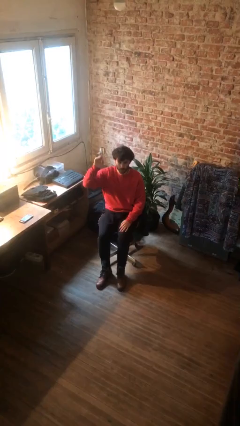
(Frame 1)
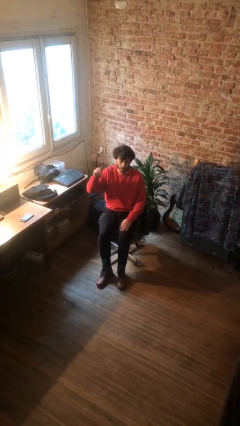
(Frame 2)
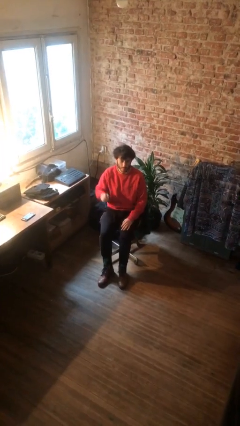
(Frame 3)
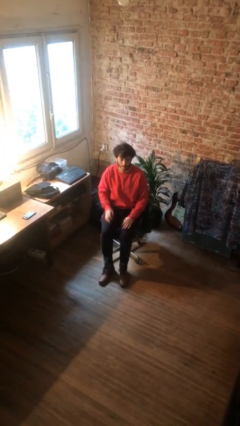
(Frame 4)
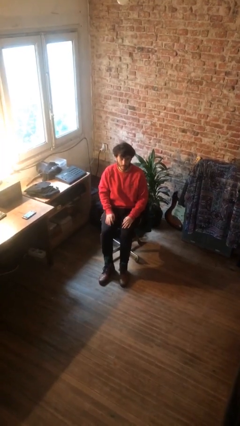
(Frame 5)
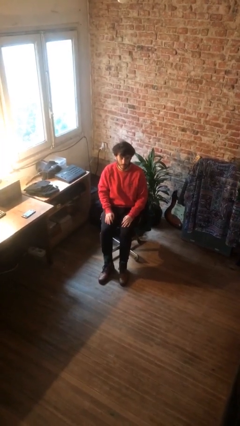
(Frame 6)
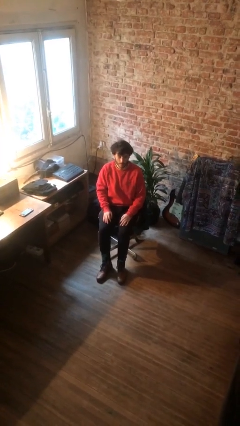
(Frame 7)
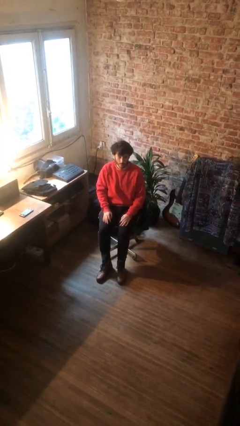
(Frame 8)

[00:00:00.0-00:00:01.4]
person gestures lower hand

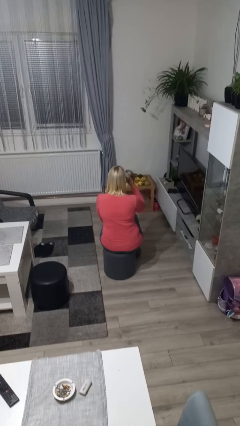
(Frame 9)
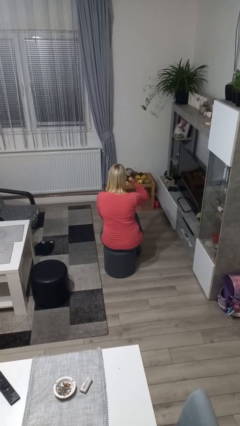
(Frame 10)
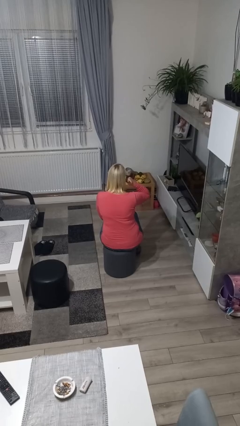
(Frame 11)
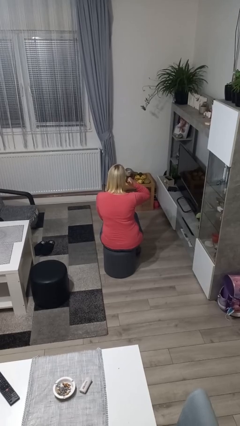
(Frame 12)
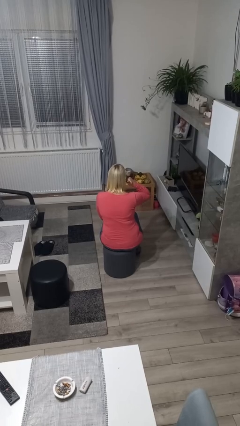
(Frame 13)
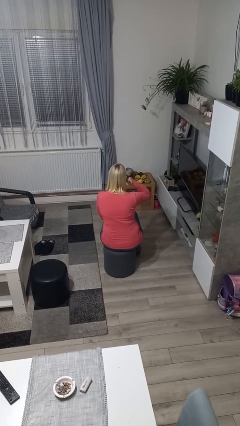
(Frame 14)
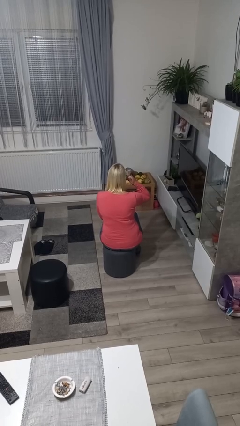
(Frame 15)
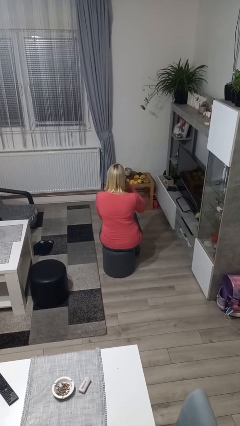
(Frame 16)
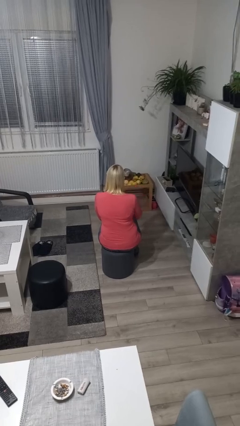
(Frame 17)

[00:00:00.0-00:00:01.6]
person gestures call me

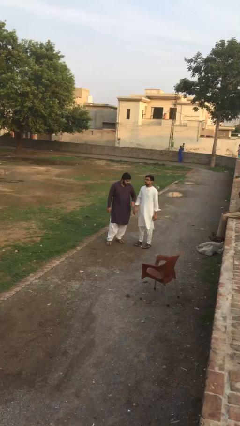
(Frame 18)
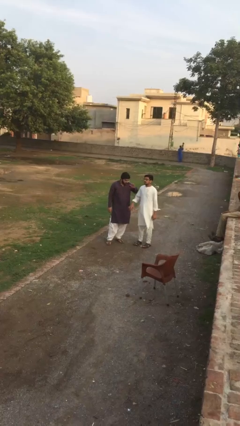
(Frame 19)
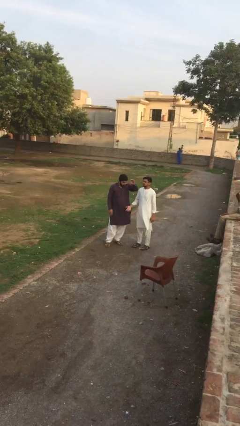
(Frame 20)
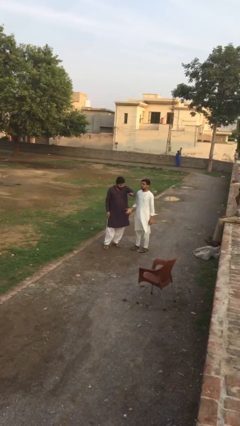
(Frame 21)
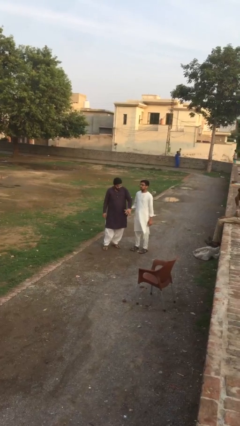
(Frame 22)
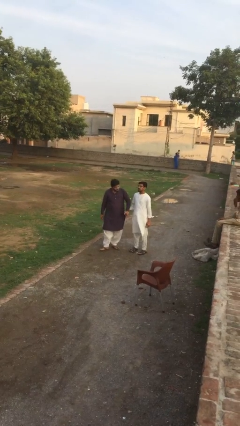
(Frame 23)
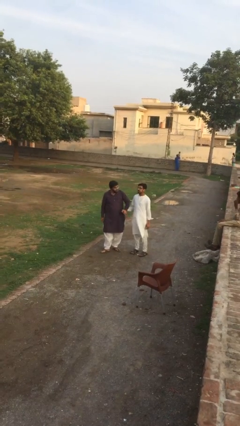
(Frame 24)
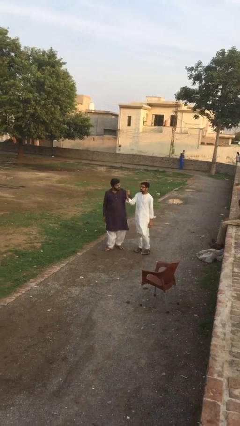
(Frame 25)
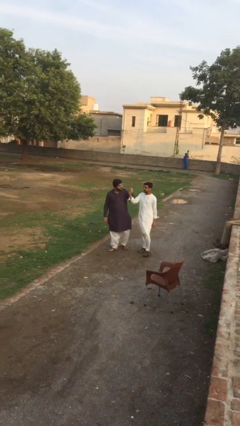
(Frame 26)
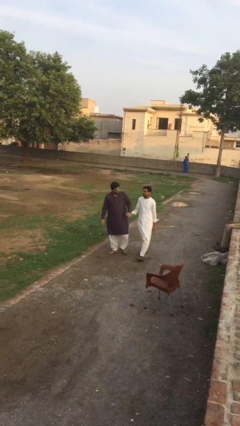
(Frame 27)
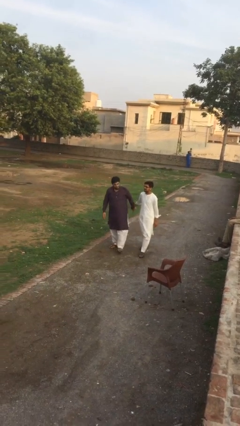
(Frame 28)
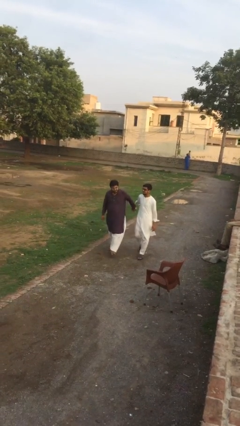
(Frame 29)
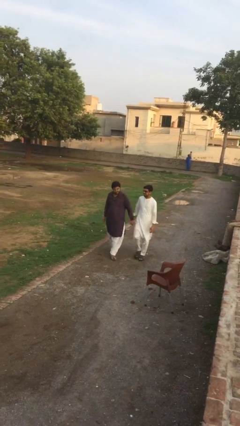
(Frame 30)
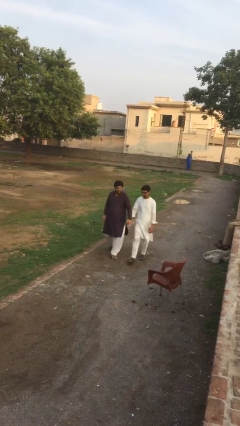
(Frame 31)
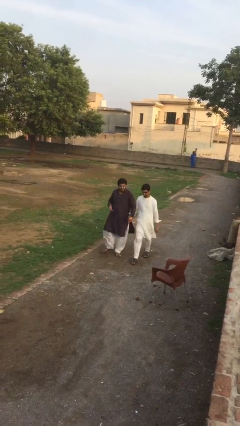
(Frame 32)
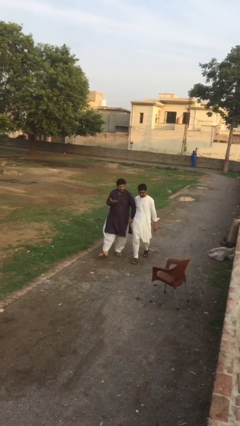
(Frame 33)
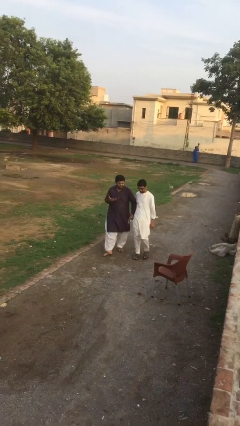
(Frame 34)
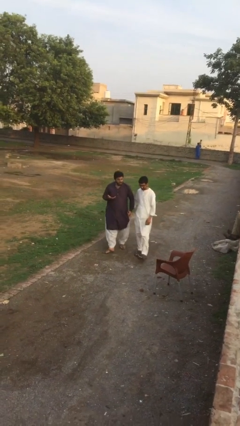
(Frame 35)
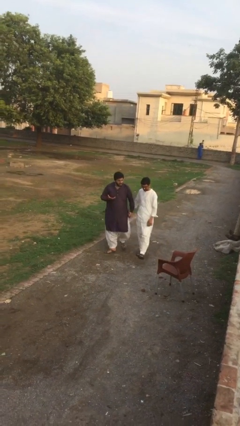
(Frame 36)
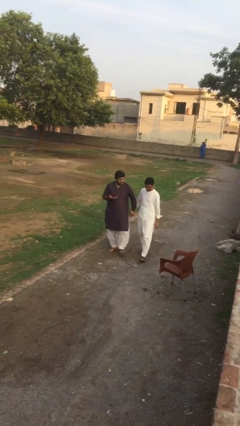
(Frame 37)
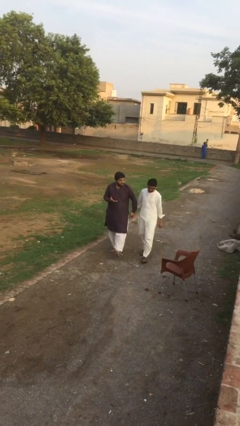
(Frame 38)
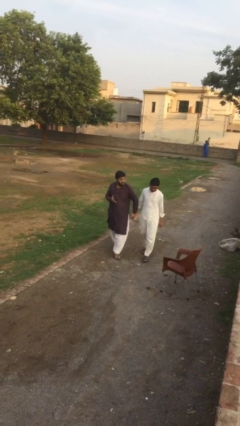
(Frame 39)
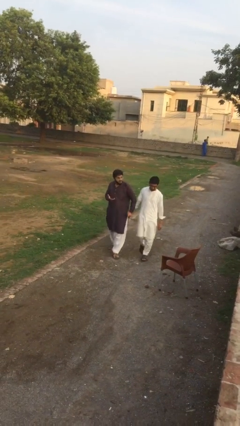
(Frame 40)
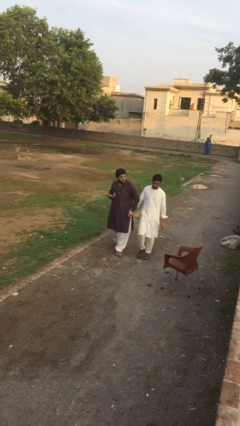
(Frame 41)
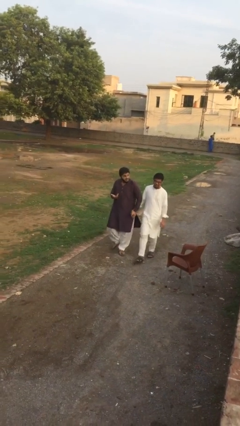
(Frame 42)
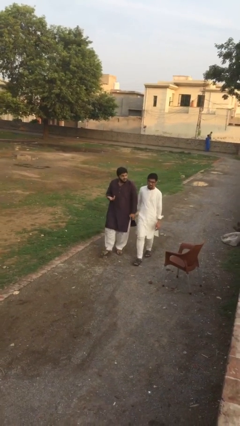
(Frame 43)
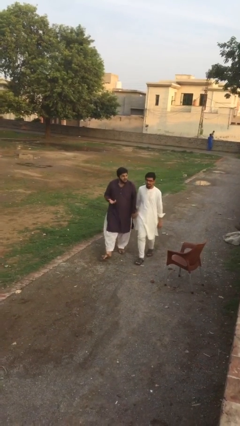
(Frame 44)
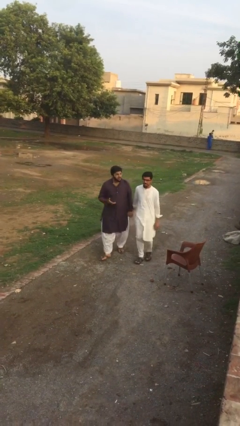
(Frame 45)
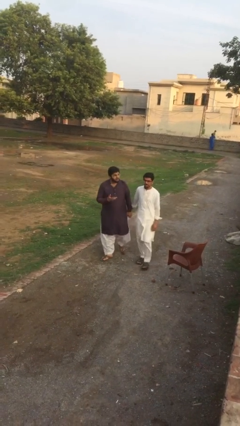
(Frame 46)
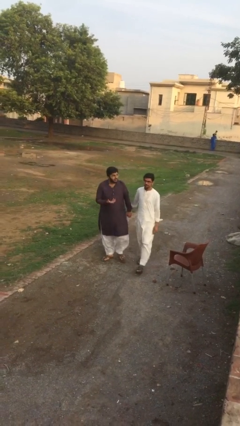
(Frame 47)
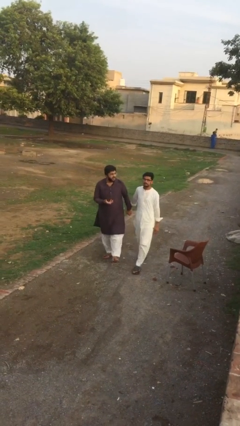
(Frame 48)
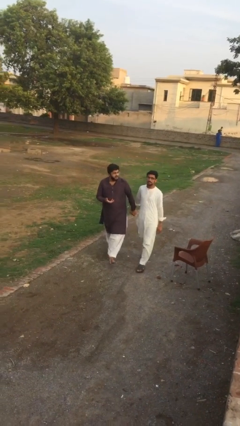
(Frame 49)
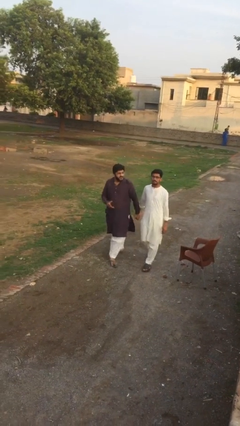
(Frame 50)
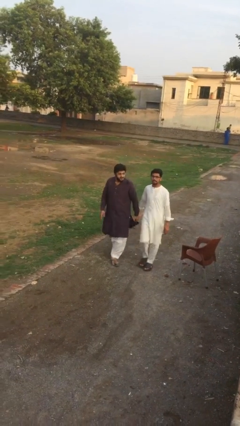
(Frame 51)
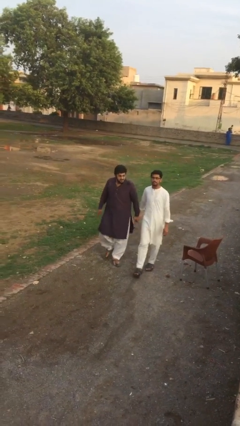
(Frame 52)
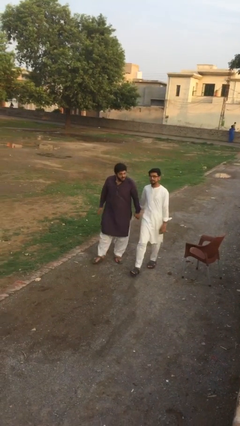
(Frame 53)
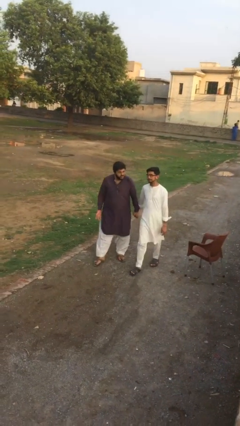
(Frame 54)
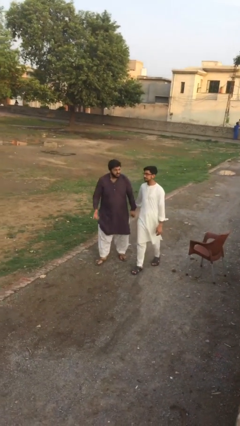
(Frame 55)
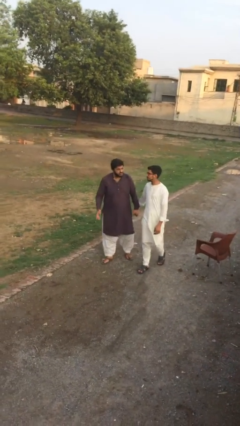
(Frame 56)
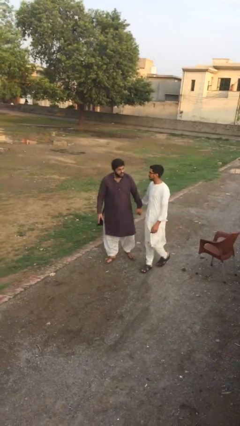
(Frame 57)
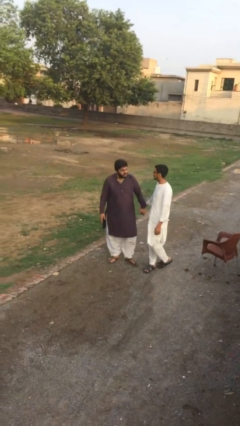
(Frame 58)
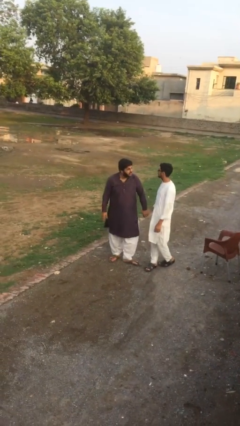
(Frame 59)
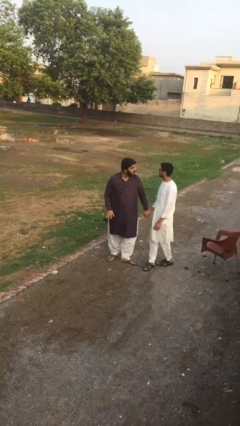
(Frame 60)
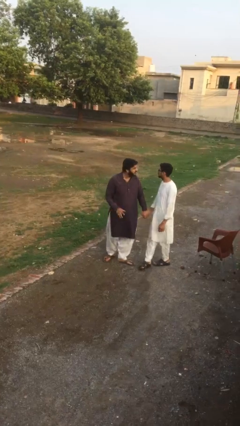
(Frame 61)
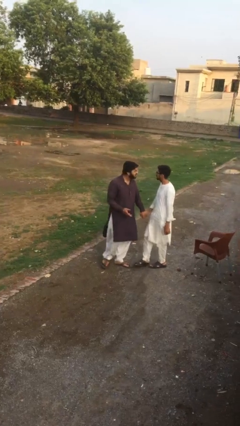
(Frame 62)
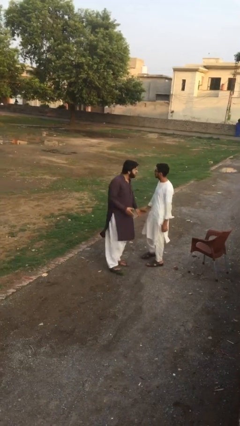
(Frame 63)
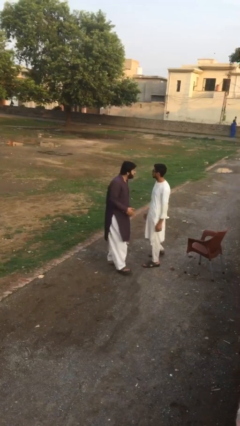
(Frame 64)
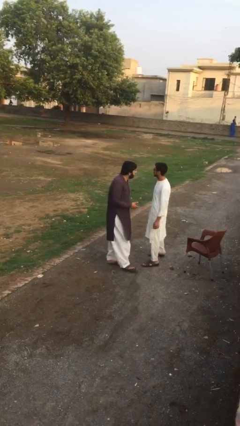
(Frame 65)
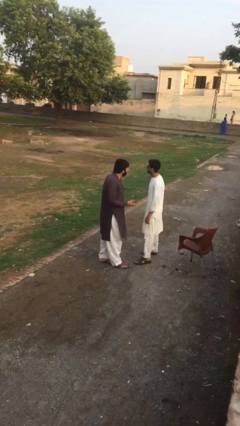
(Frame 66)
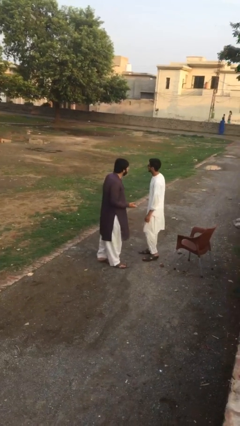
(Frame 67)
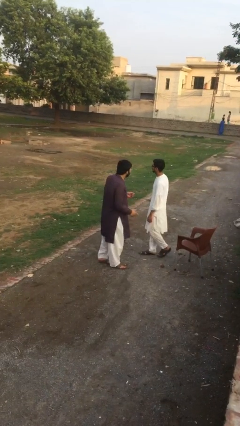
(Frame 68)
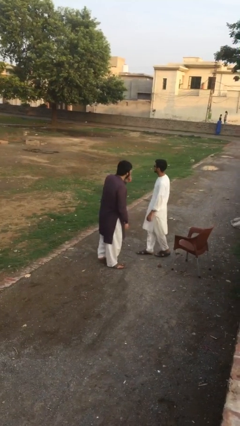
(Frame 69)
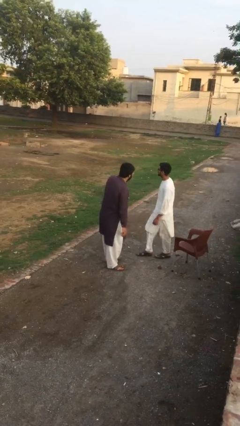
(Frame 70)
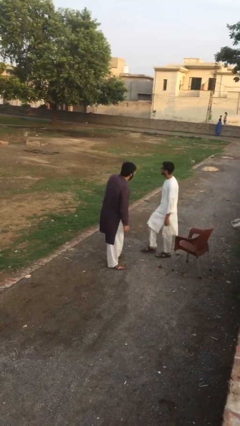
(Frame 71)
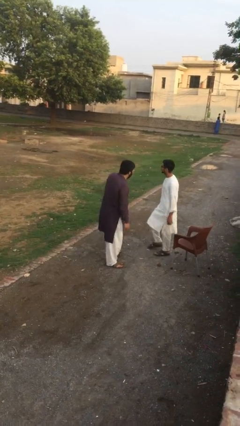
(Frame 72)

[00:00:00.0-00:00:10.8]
person holds hand

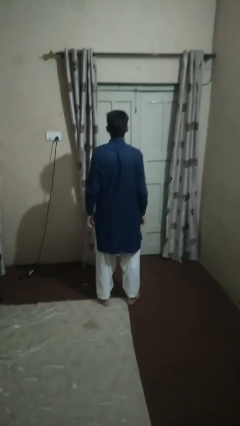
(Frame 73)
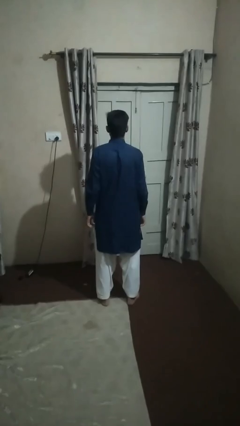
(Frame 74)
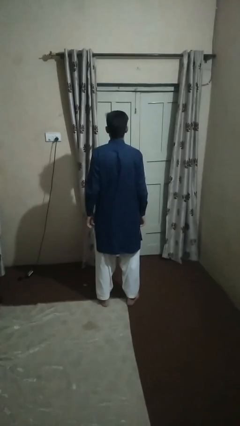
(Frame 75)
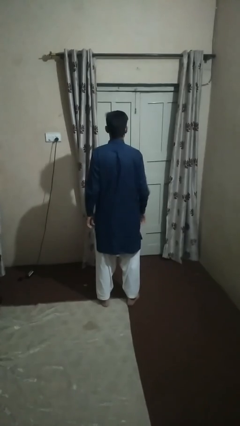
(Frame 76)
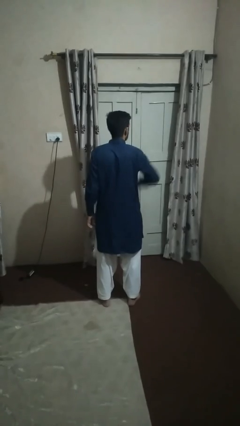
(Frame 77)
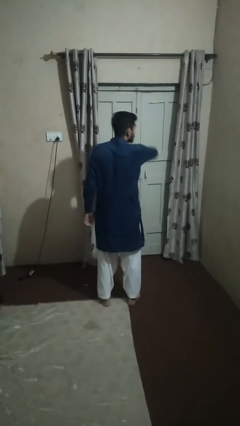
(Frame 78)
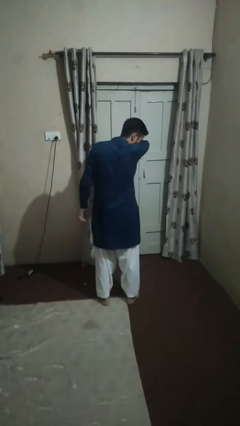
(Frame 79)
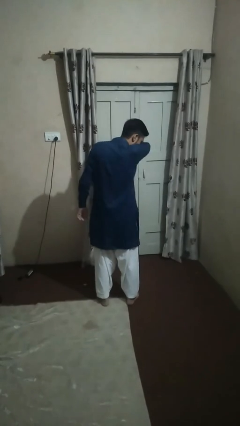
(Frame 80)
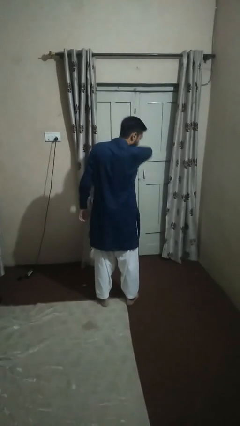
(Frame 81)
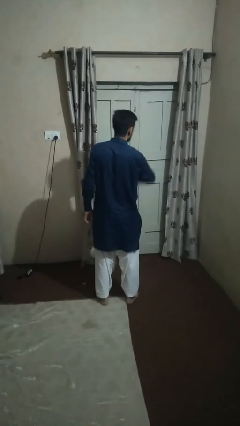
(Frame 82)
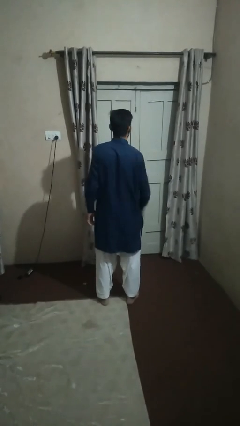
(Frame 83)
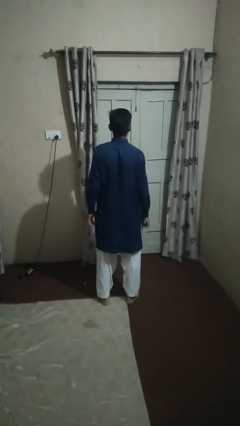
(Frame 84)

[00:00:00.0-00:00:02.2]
person sneezes into arm

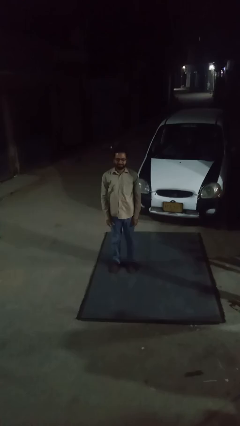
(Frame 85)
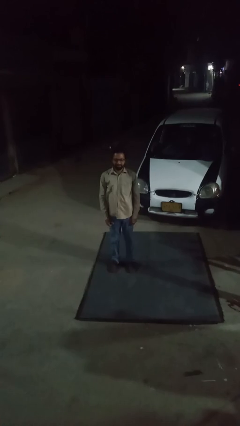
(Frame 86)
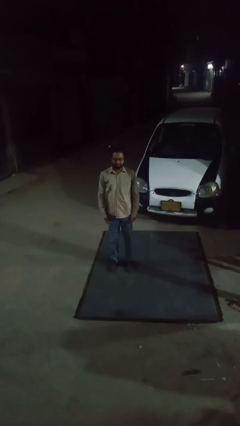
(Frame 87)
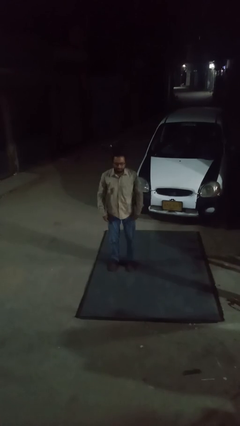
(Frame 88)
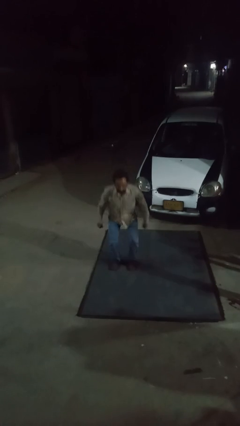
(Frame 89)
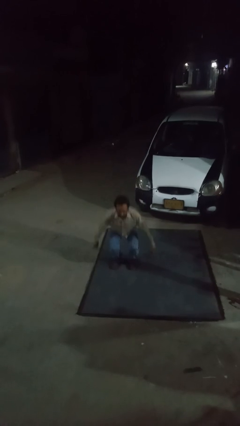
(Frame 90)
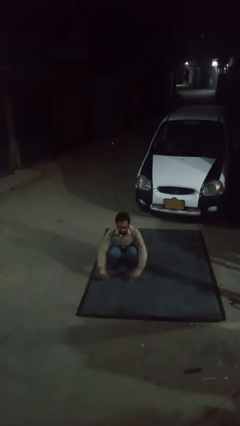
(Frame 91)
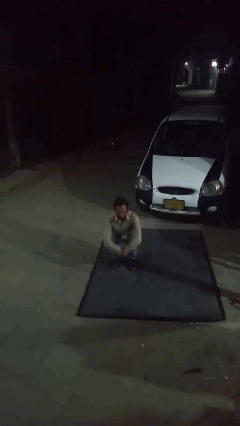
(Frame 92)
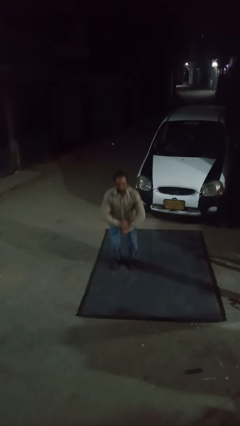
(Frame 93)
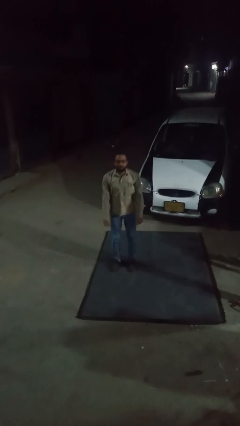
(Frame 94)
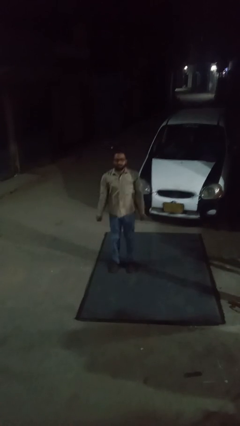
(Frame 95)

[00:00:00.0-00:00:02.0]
person exercises with situp
